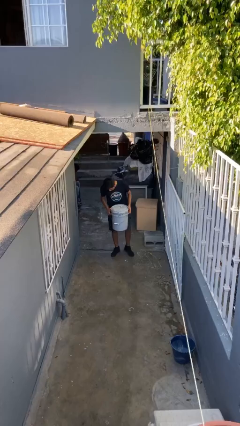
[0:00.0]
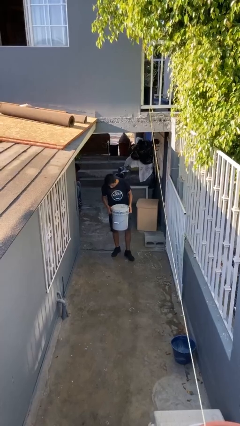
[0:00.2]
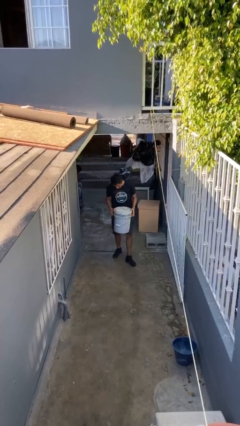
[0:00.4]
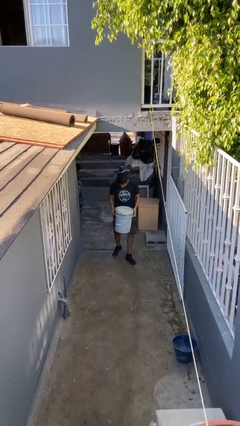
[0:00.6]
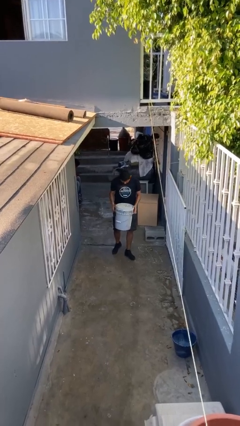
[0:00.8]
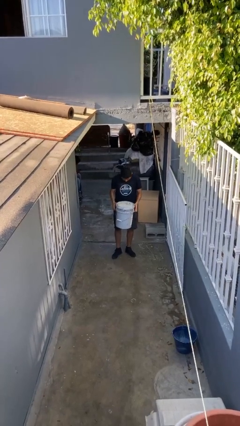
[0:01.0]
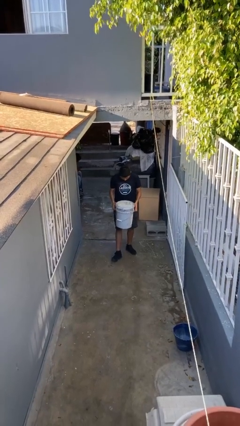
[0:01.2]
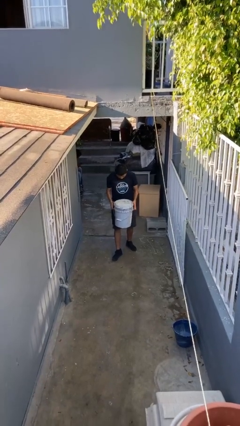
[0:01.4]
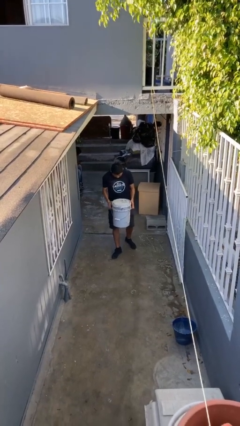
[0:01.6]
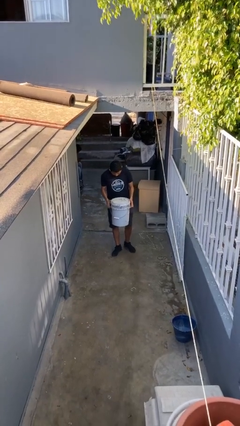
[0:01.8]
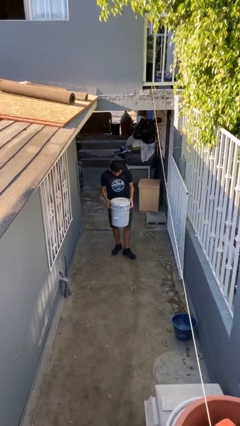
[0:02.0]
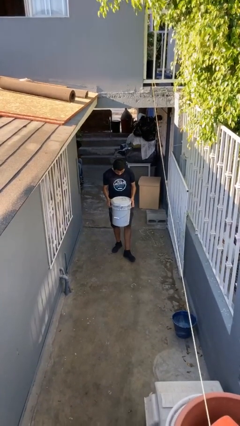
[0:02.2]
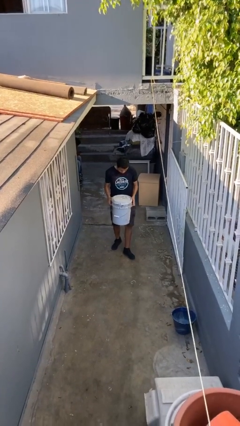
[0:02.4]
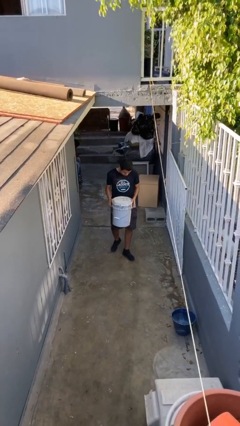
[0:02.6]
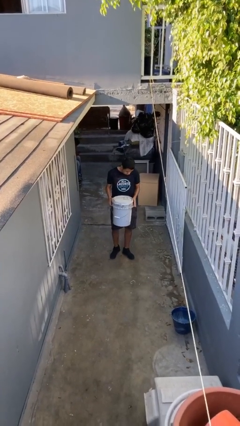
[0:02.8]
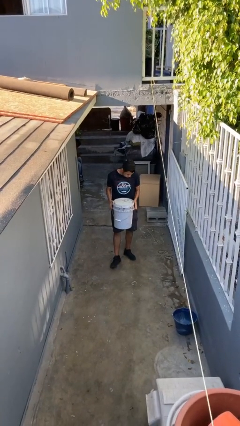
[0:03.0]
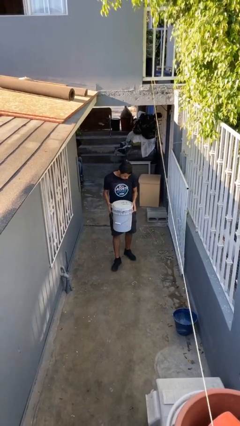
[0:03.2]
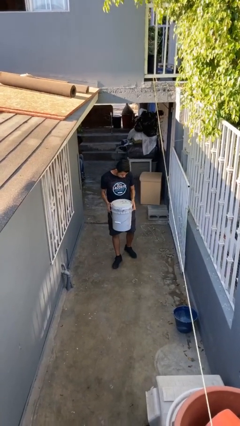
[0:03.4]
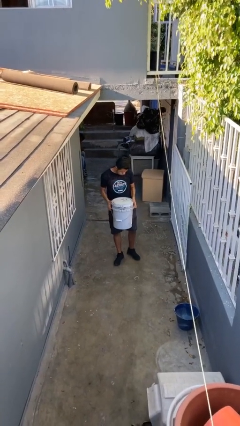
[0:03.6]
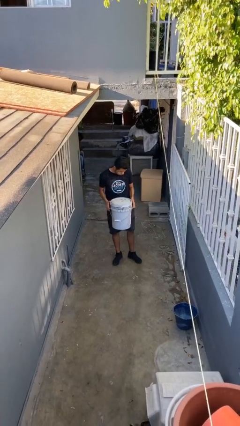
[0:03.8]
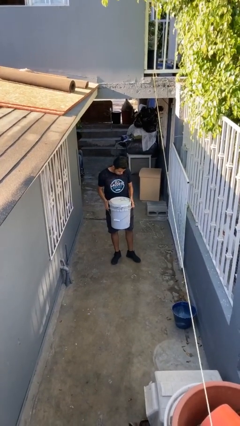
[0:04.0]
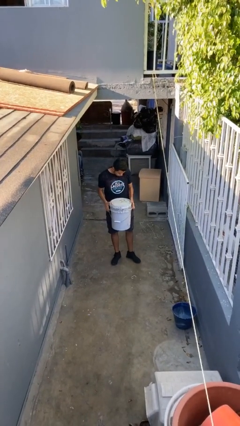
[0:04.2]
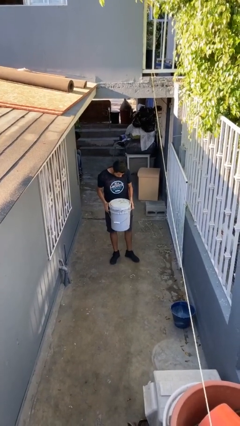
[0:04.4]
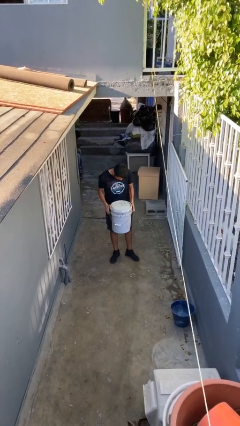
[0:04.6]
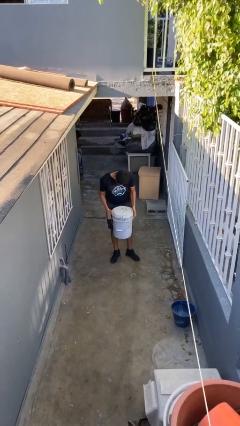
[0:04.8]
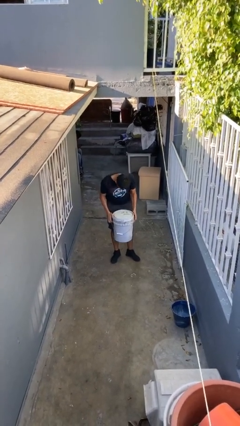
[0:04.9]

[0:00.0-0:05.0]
person carries heavy object

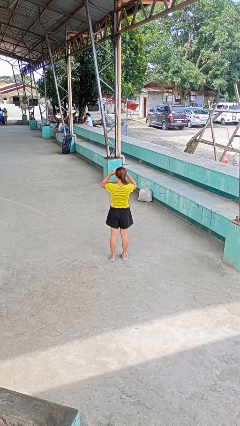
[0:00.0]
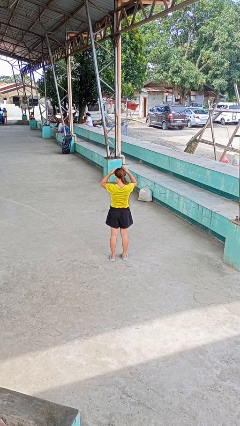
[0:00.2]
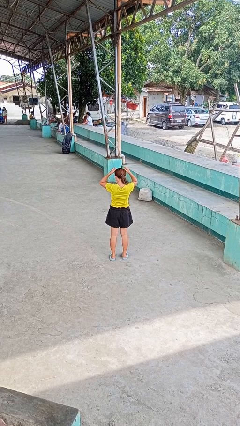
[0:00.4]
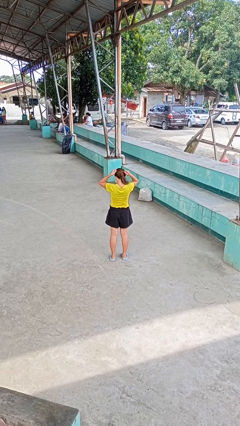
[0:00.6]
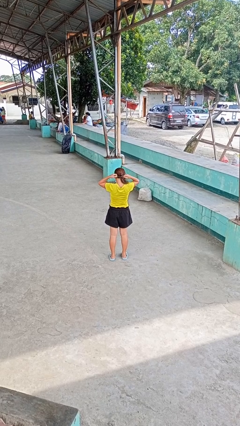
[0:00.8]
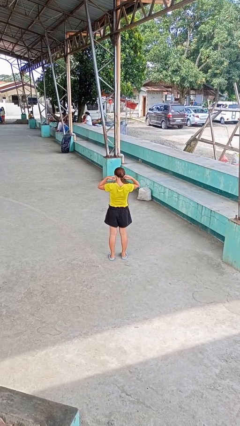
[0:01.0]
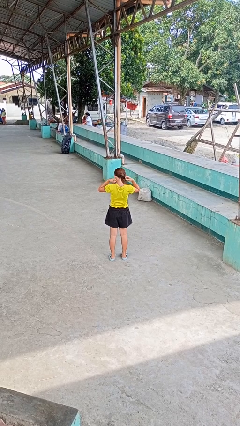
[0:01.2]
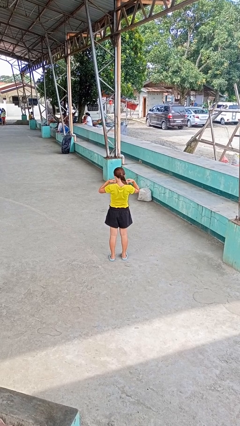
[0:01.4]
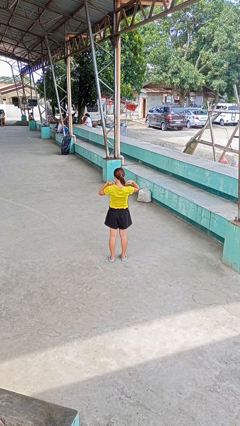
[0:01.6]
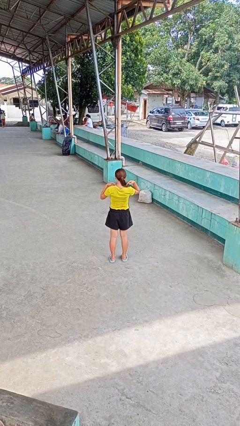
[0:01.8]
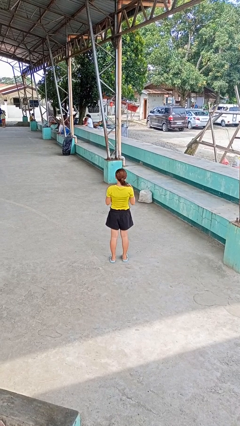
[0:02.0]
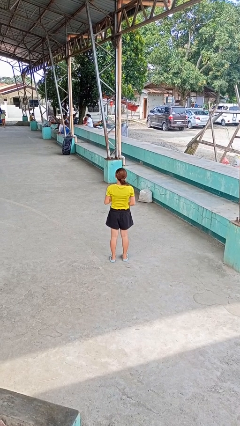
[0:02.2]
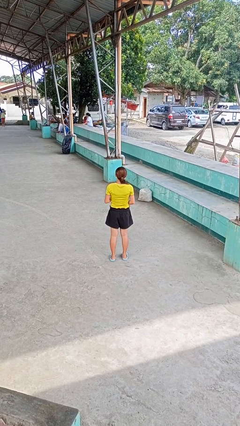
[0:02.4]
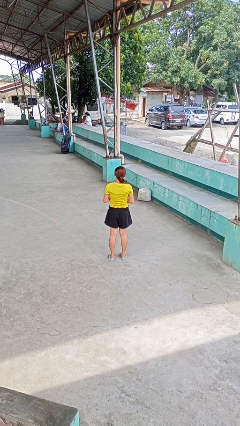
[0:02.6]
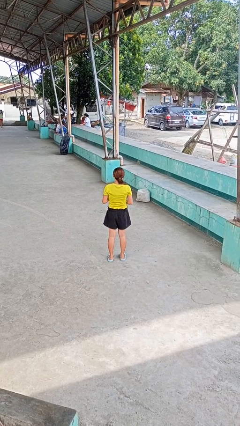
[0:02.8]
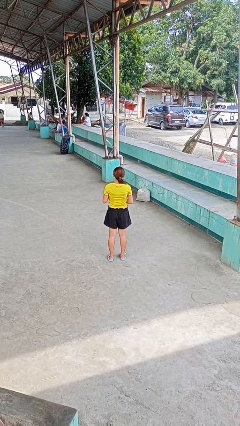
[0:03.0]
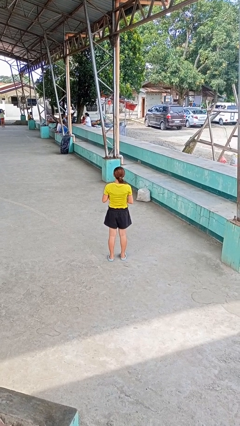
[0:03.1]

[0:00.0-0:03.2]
person puts on necklace

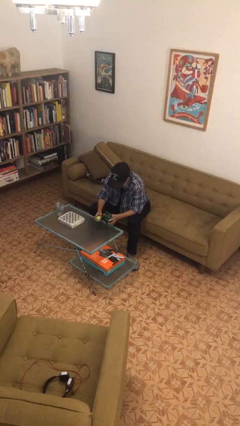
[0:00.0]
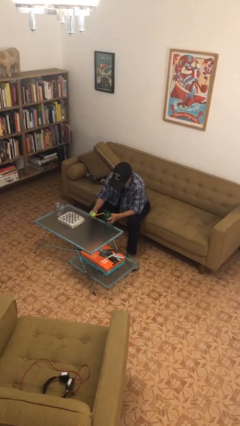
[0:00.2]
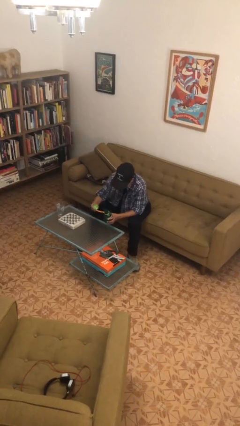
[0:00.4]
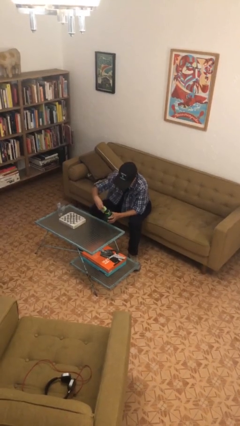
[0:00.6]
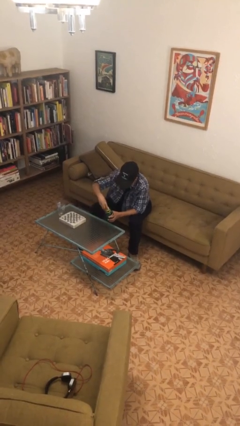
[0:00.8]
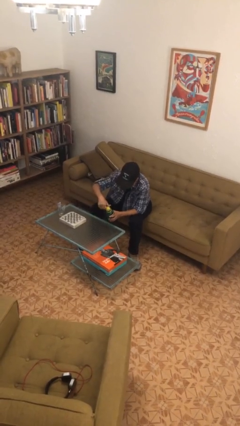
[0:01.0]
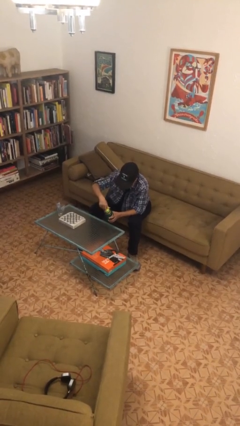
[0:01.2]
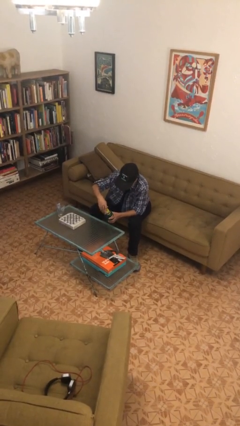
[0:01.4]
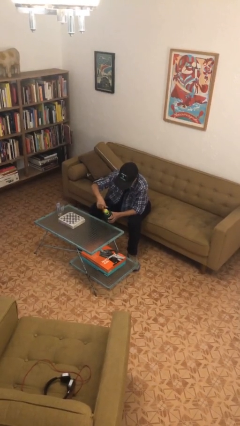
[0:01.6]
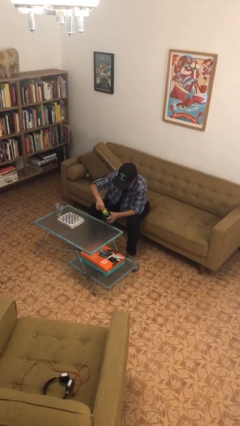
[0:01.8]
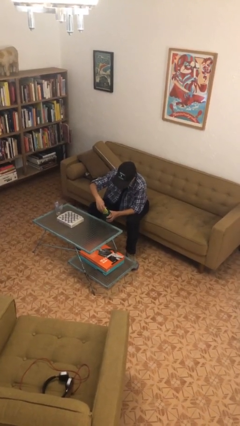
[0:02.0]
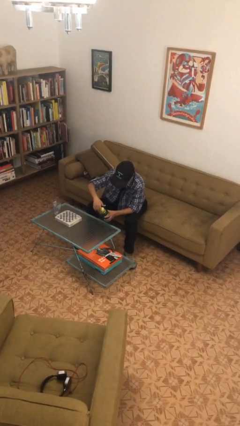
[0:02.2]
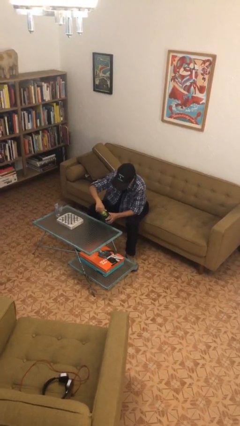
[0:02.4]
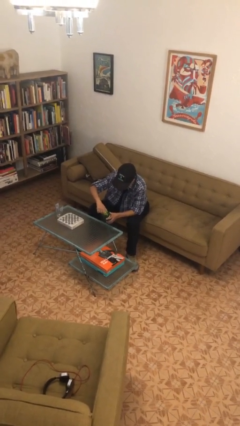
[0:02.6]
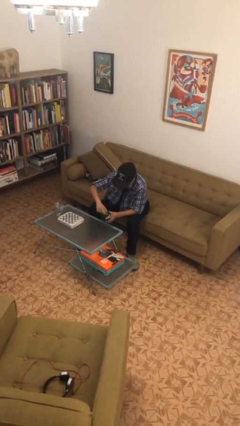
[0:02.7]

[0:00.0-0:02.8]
person screws lid to bottle

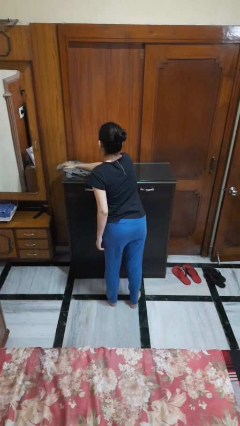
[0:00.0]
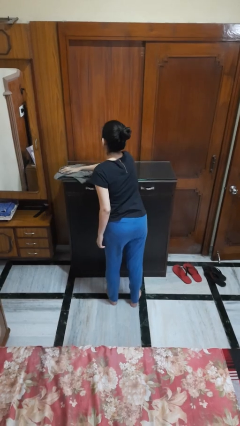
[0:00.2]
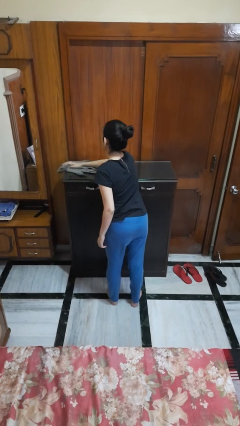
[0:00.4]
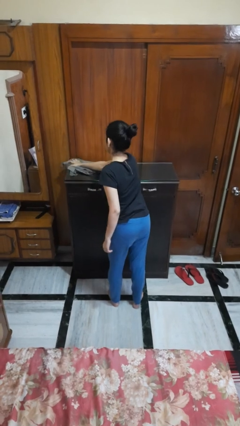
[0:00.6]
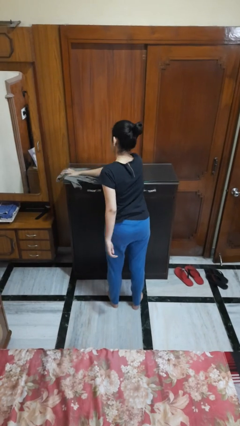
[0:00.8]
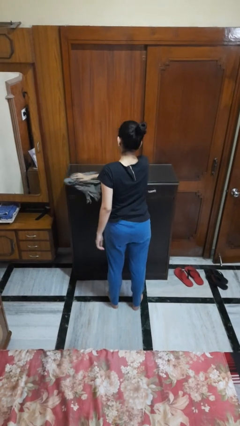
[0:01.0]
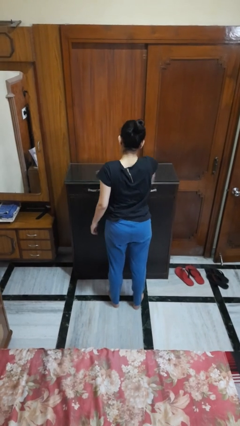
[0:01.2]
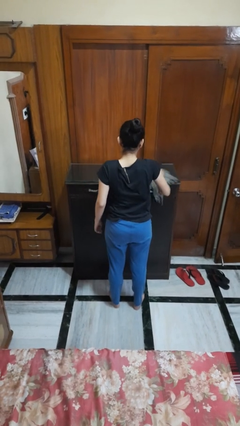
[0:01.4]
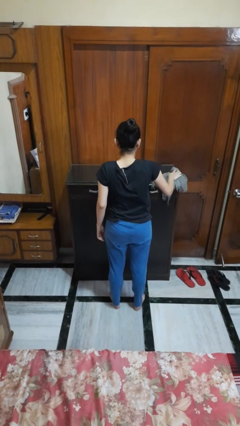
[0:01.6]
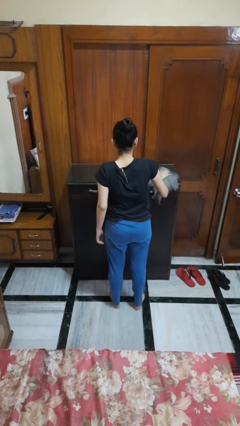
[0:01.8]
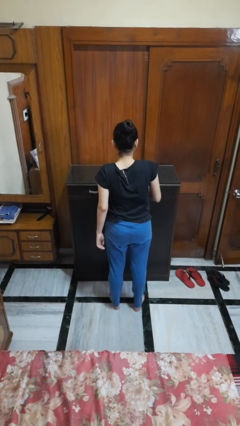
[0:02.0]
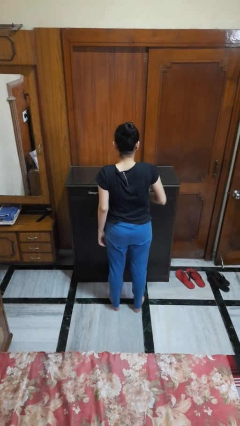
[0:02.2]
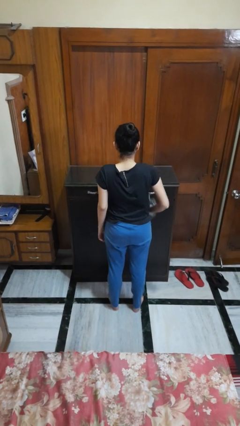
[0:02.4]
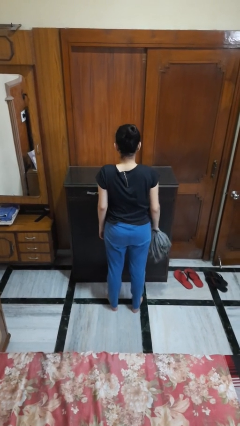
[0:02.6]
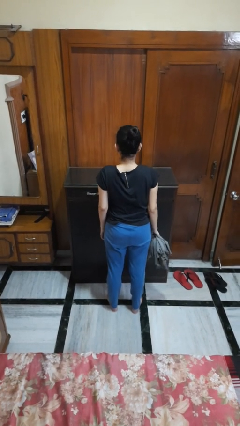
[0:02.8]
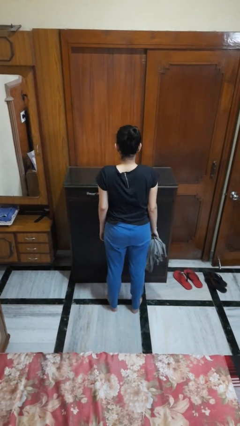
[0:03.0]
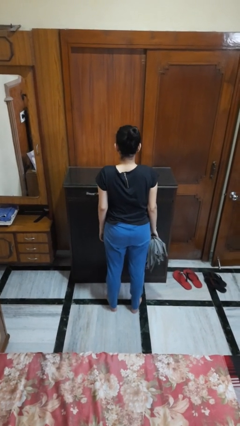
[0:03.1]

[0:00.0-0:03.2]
person cleans table with rag

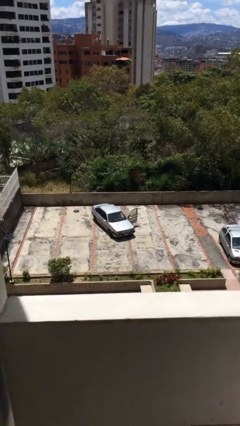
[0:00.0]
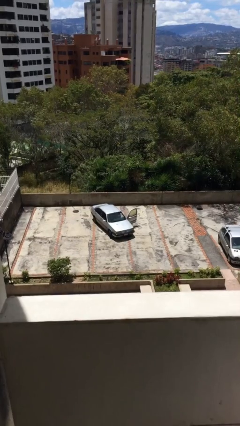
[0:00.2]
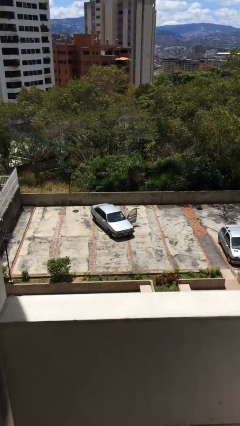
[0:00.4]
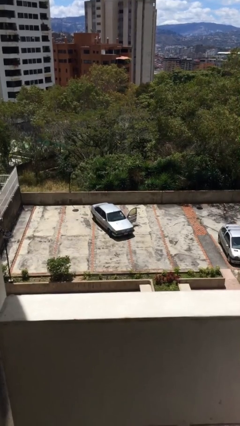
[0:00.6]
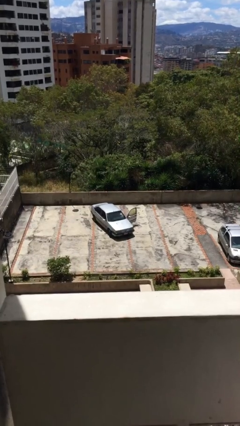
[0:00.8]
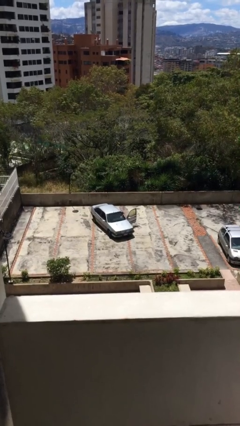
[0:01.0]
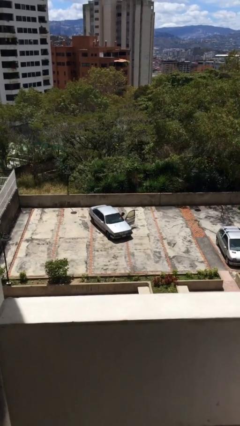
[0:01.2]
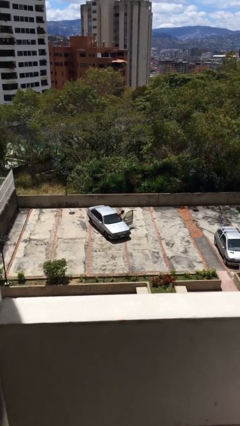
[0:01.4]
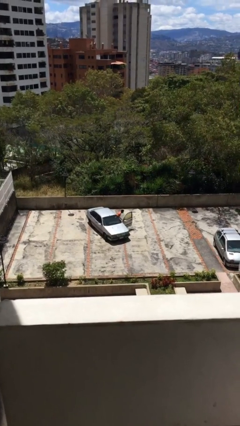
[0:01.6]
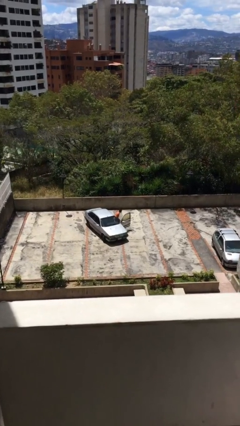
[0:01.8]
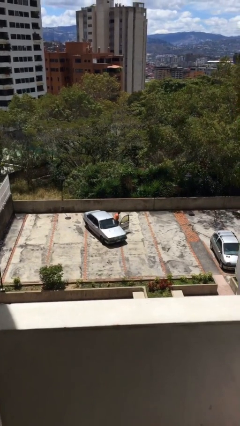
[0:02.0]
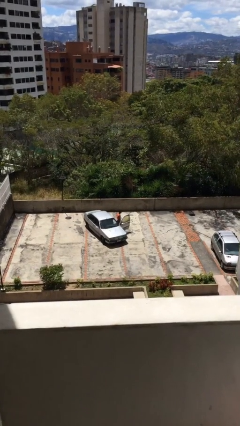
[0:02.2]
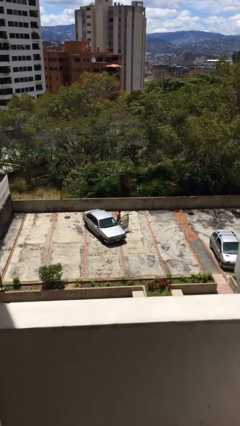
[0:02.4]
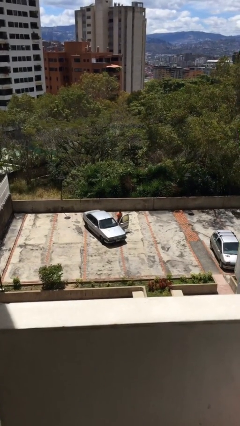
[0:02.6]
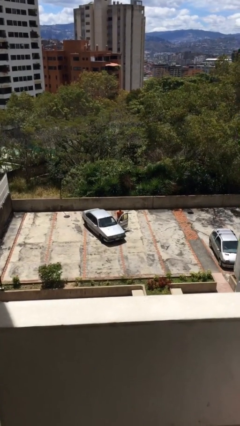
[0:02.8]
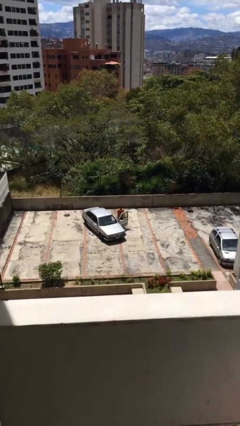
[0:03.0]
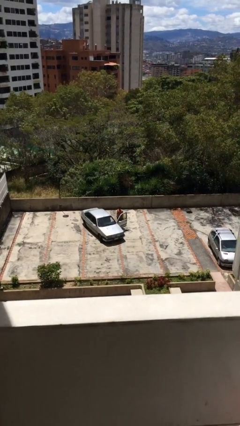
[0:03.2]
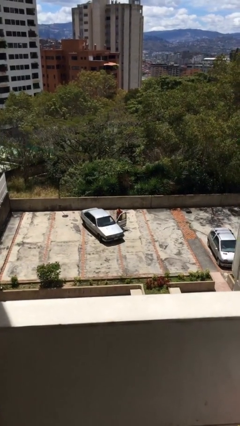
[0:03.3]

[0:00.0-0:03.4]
person exits car
